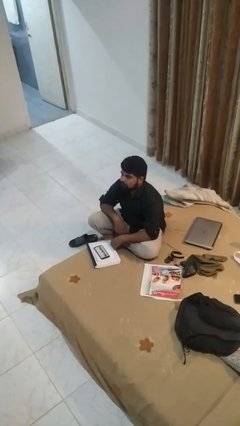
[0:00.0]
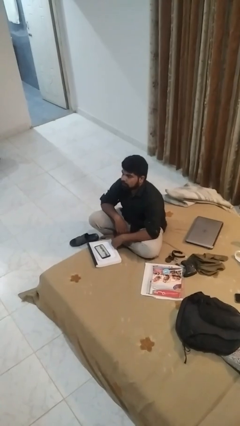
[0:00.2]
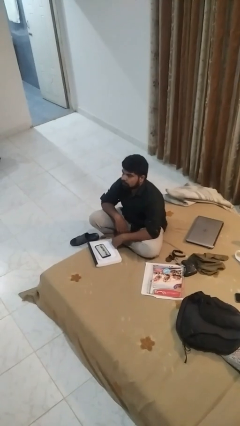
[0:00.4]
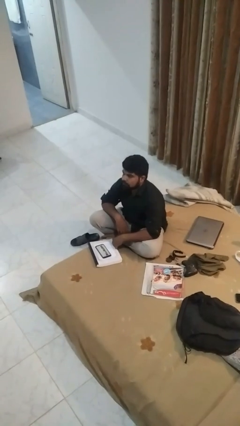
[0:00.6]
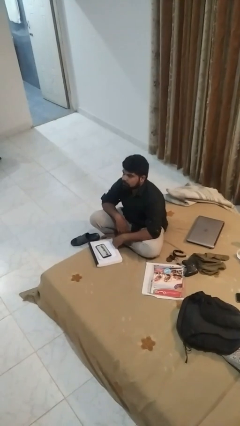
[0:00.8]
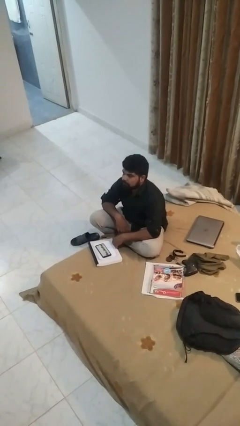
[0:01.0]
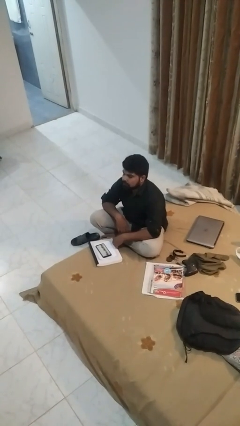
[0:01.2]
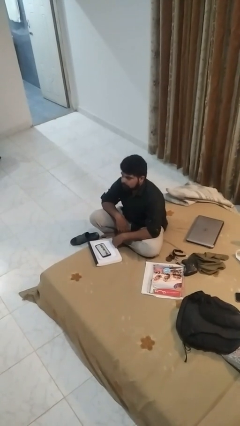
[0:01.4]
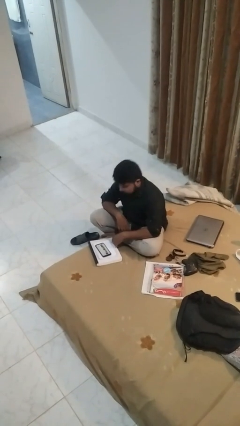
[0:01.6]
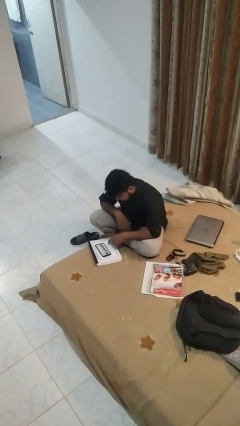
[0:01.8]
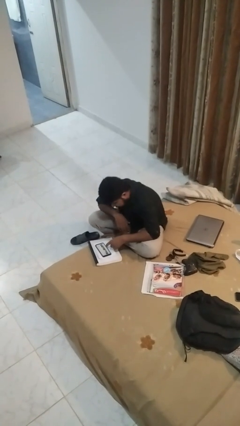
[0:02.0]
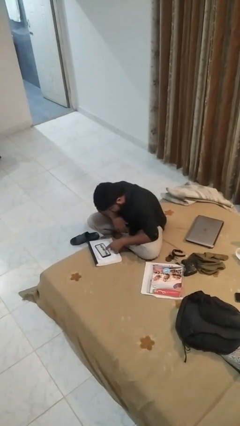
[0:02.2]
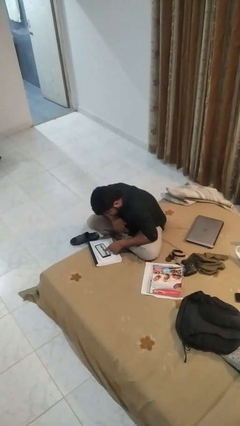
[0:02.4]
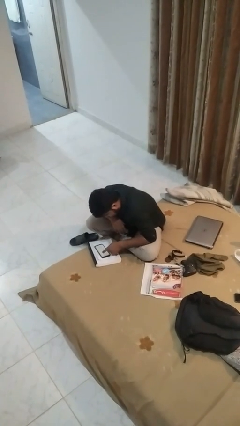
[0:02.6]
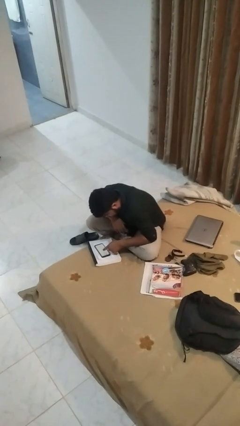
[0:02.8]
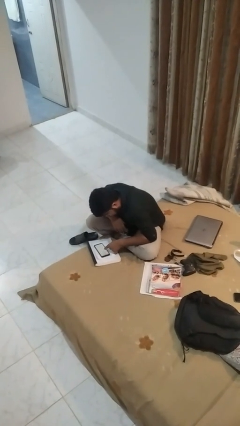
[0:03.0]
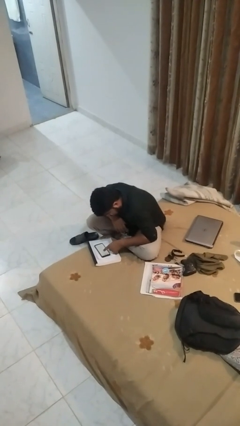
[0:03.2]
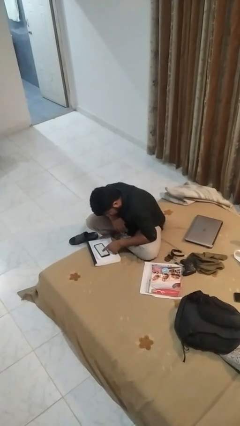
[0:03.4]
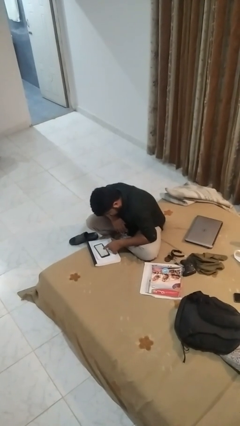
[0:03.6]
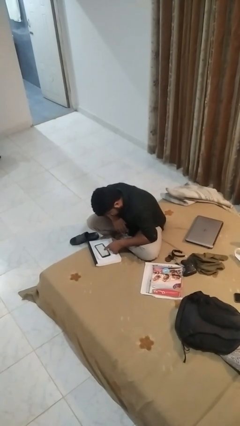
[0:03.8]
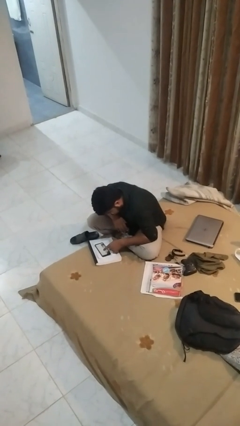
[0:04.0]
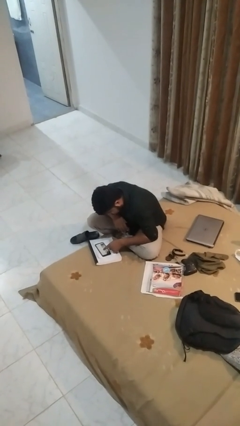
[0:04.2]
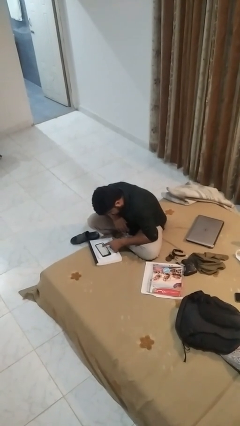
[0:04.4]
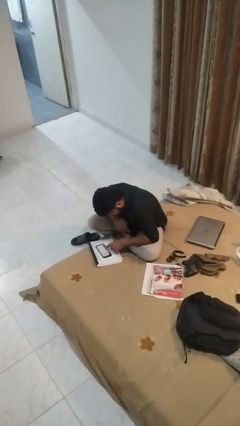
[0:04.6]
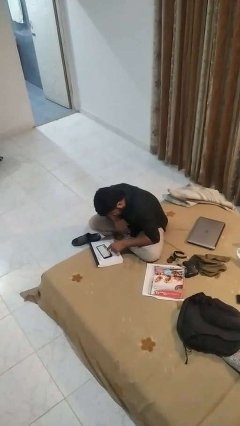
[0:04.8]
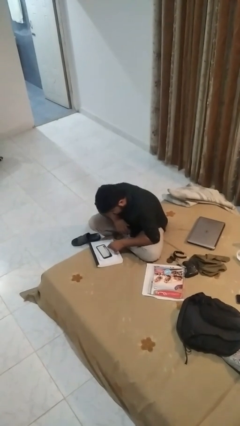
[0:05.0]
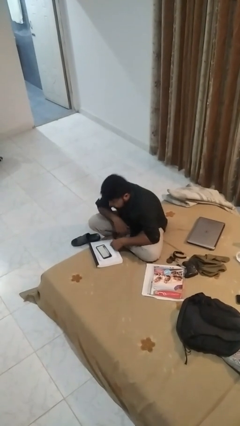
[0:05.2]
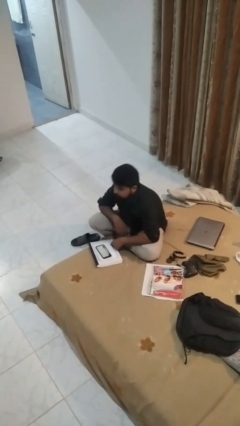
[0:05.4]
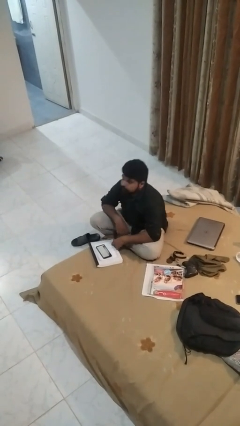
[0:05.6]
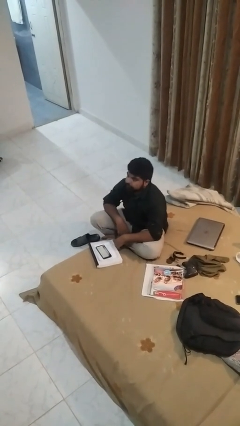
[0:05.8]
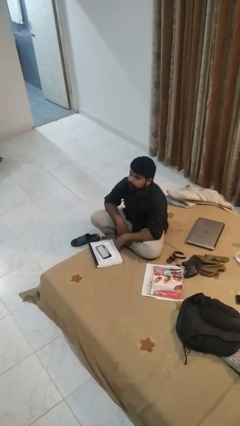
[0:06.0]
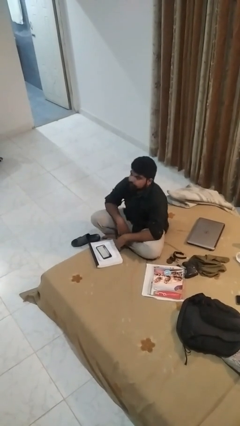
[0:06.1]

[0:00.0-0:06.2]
person interacts with tablet

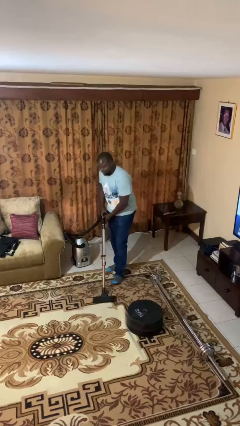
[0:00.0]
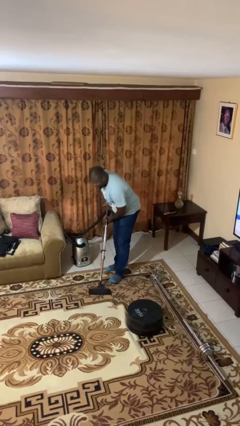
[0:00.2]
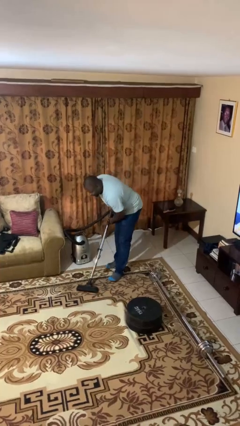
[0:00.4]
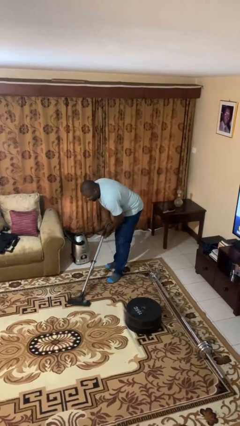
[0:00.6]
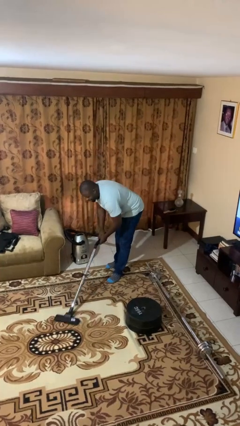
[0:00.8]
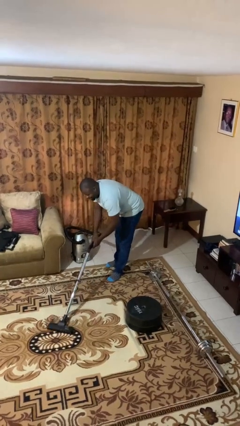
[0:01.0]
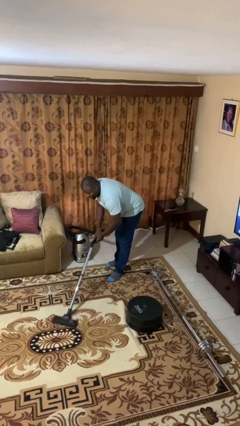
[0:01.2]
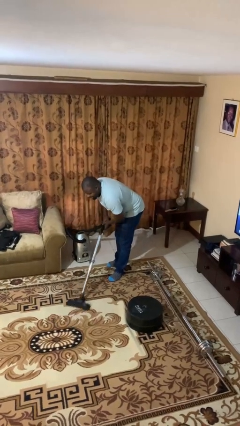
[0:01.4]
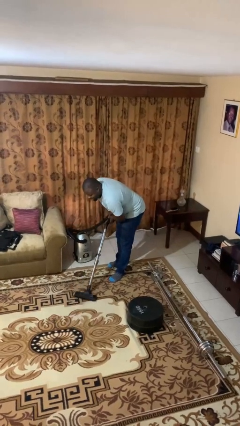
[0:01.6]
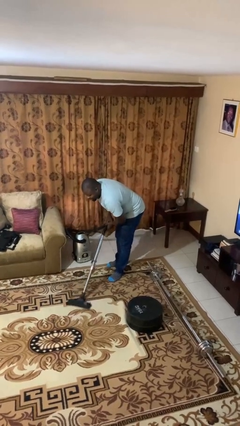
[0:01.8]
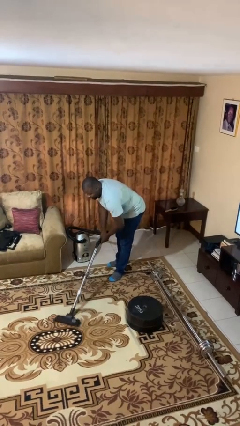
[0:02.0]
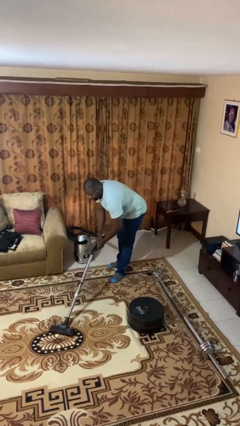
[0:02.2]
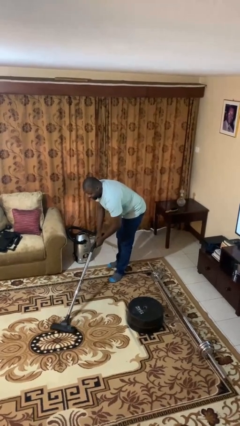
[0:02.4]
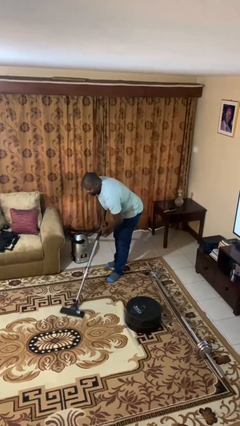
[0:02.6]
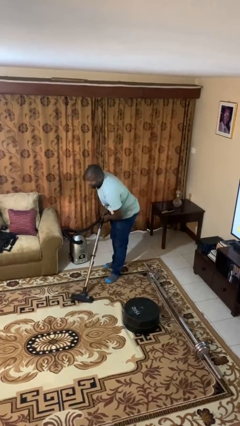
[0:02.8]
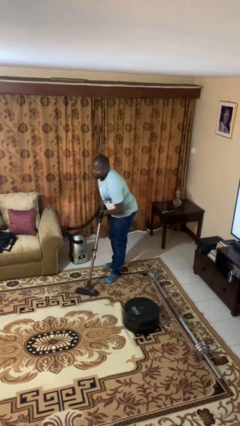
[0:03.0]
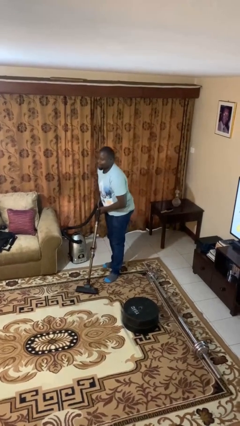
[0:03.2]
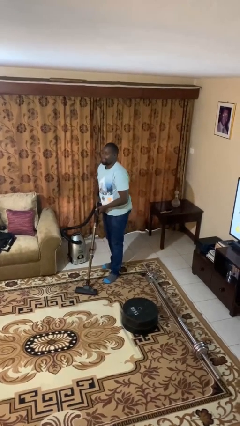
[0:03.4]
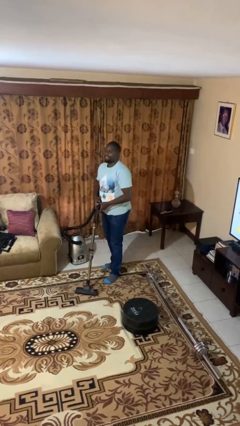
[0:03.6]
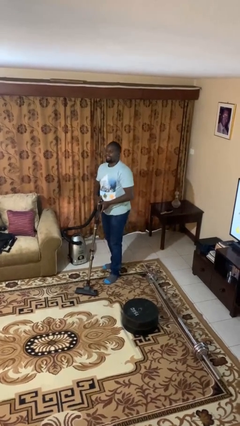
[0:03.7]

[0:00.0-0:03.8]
person vacuums carpet

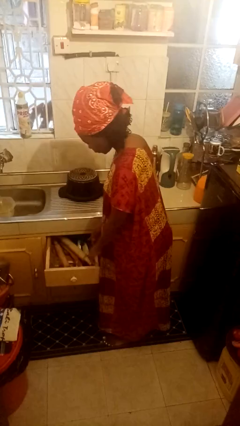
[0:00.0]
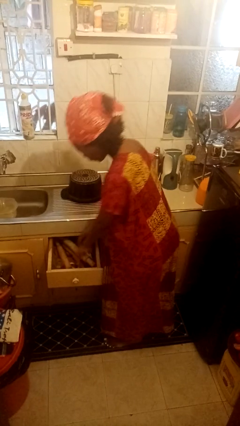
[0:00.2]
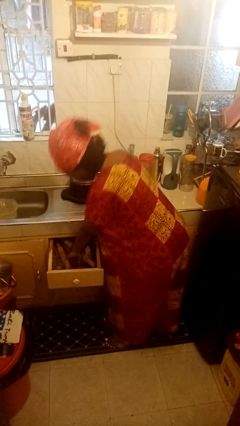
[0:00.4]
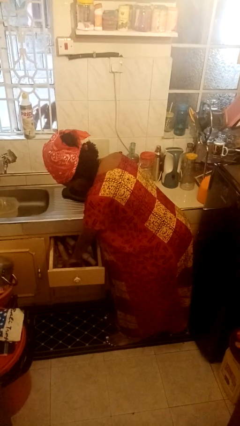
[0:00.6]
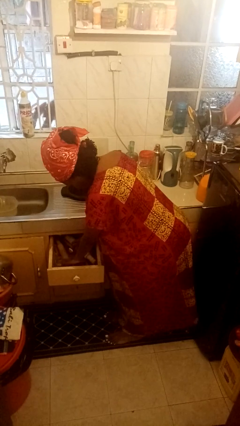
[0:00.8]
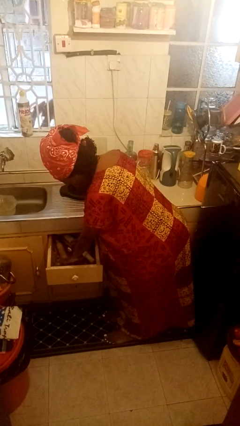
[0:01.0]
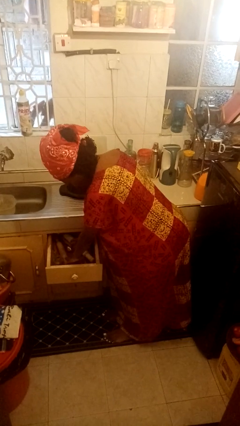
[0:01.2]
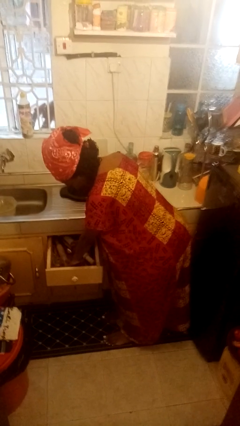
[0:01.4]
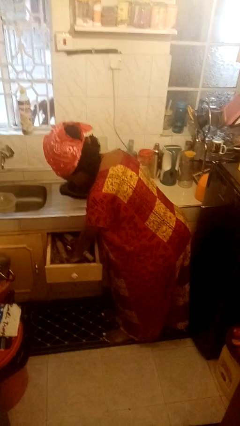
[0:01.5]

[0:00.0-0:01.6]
person searches in kitchen drawer

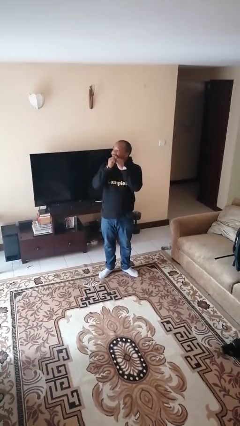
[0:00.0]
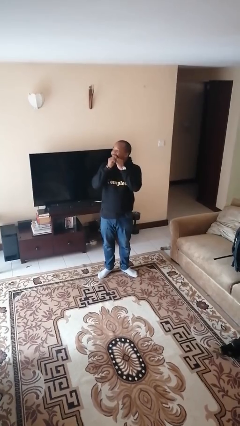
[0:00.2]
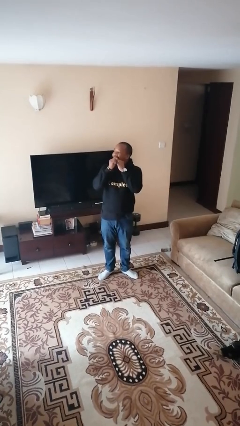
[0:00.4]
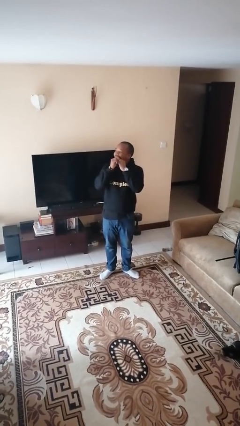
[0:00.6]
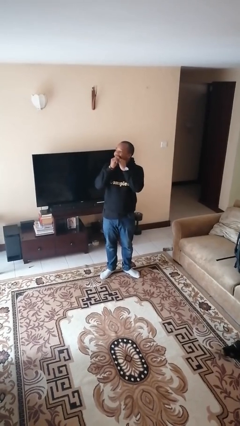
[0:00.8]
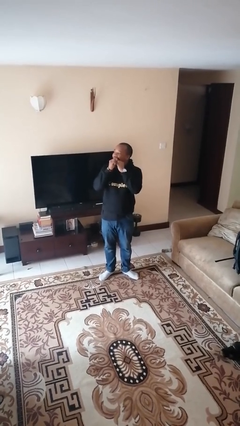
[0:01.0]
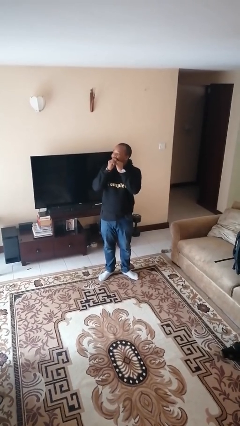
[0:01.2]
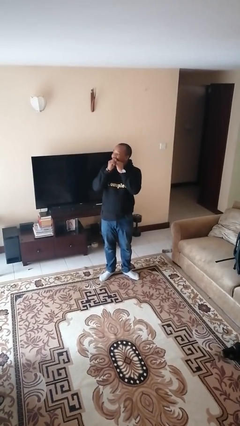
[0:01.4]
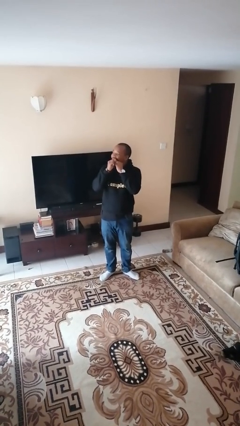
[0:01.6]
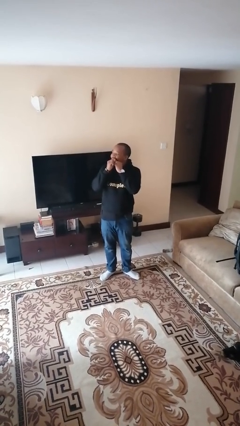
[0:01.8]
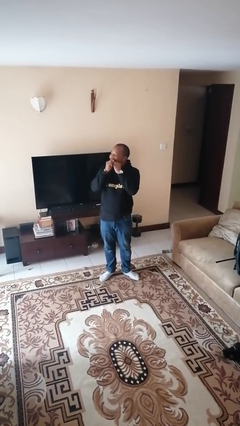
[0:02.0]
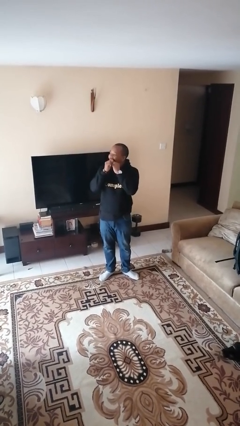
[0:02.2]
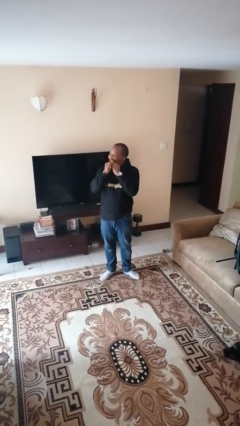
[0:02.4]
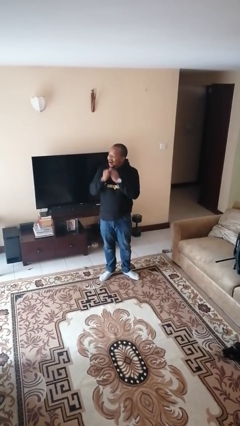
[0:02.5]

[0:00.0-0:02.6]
person flosses

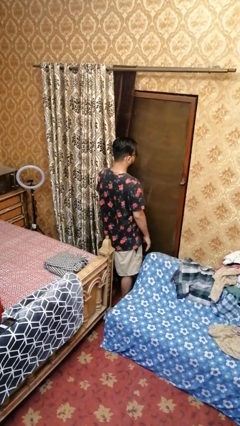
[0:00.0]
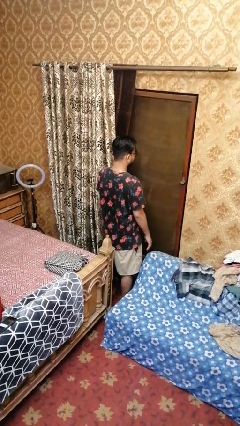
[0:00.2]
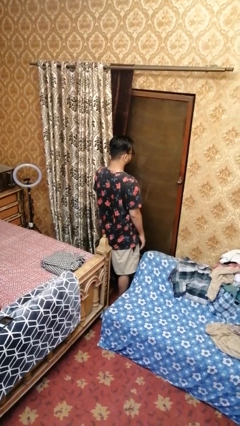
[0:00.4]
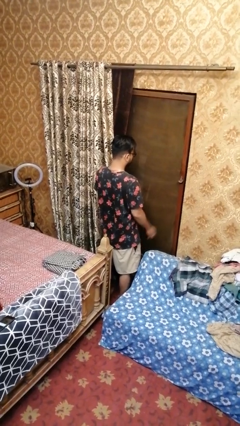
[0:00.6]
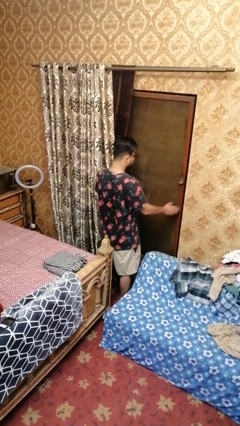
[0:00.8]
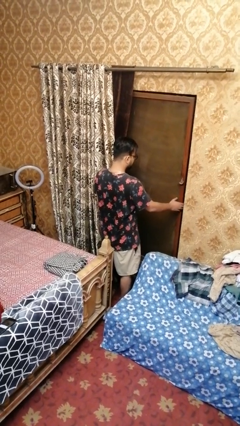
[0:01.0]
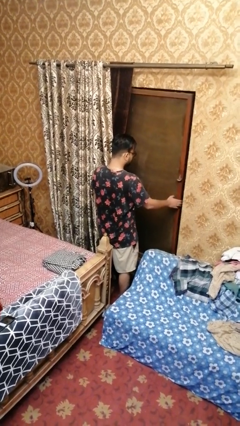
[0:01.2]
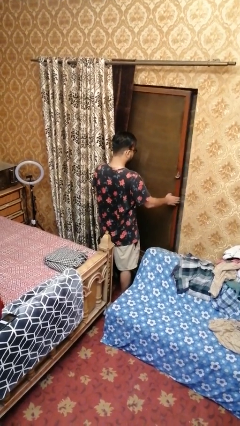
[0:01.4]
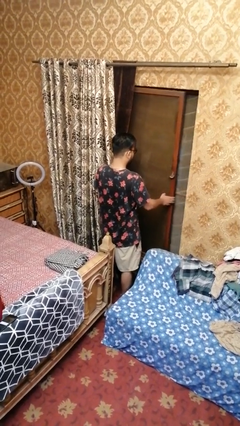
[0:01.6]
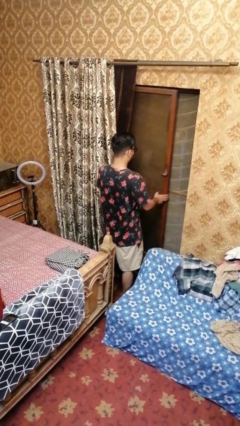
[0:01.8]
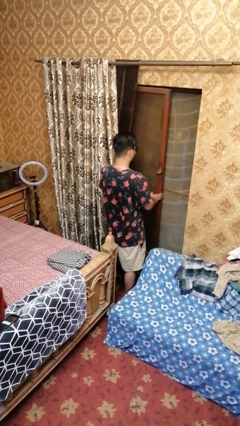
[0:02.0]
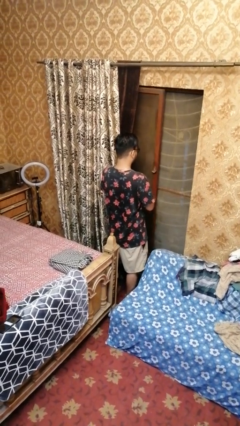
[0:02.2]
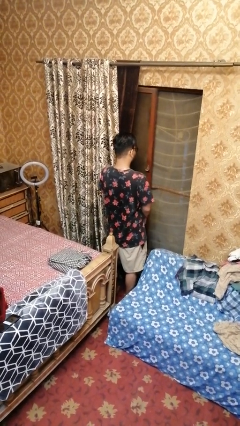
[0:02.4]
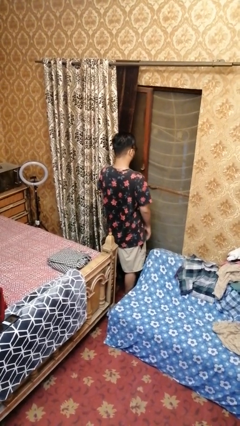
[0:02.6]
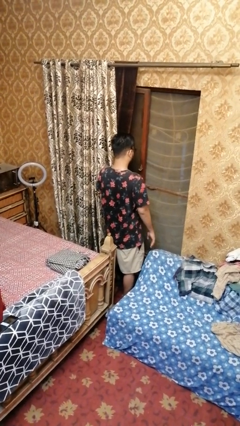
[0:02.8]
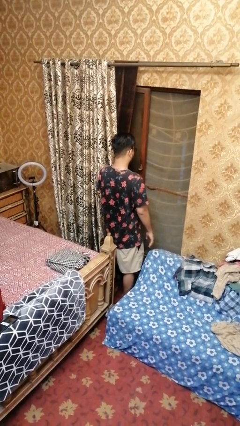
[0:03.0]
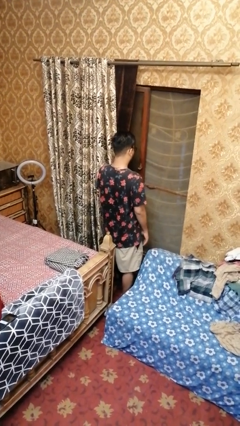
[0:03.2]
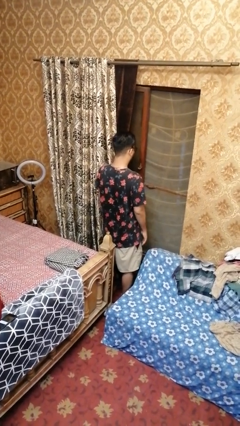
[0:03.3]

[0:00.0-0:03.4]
person opens home window
